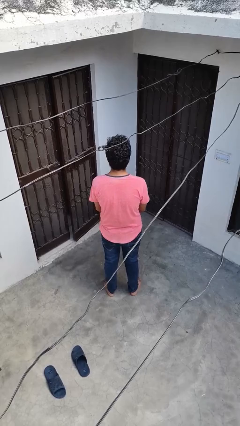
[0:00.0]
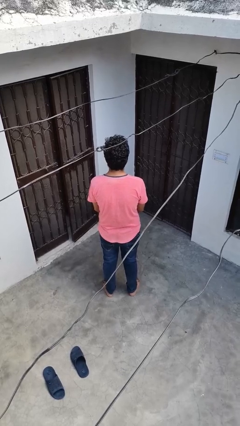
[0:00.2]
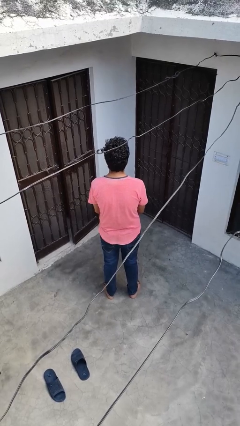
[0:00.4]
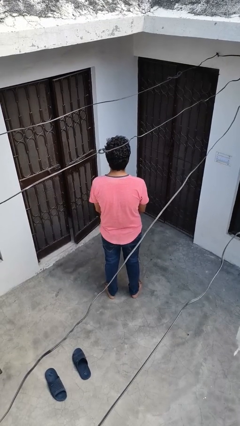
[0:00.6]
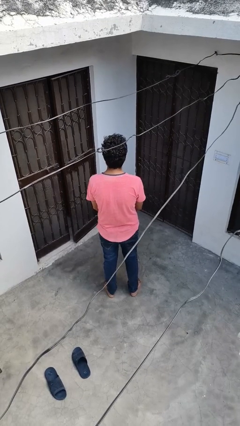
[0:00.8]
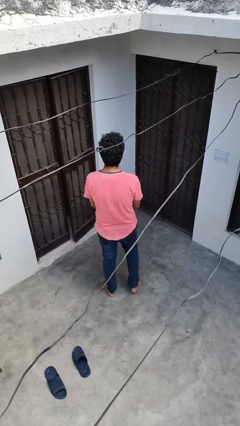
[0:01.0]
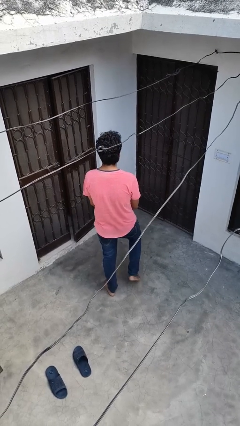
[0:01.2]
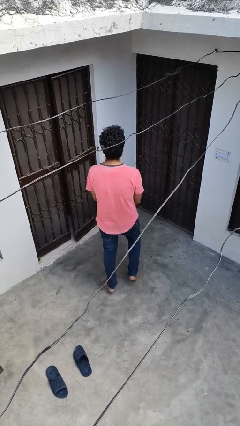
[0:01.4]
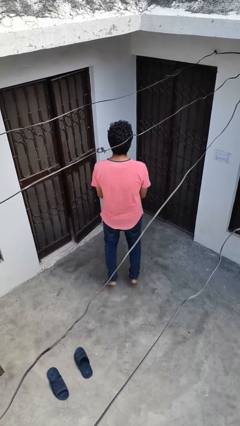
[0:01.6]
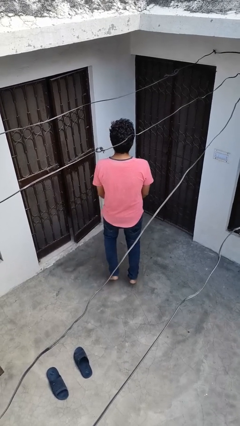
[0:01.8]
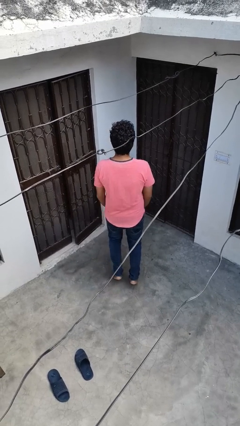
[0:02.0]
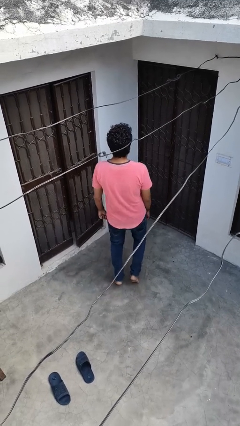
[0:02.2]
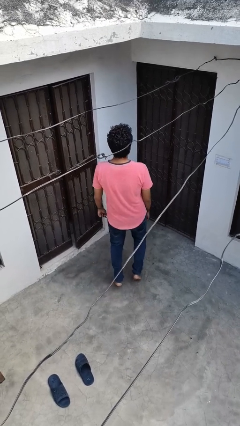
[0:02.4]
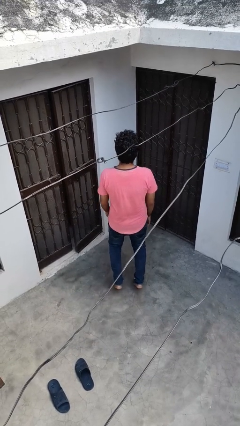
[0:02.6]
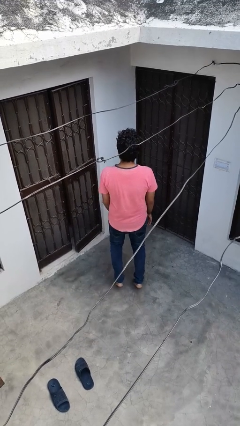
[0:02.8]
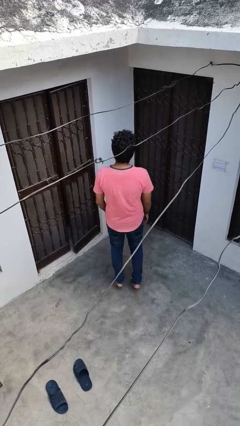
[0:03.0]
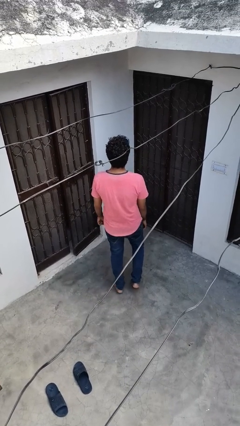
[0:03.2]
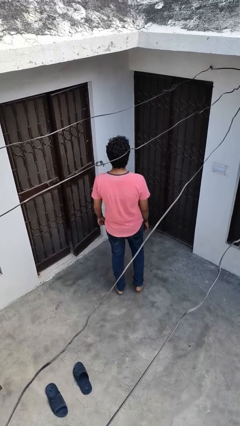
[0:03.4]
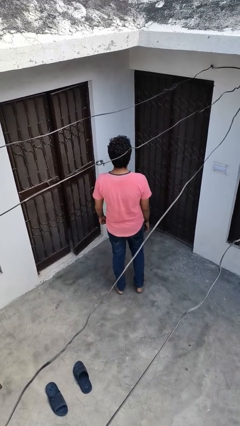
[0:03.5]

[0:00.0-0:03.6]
person walks tiptoe

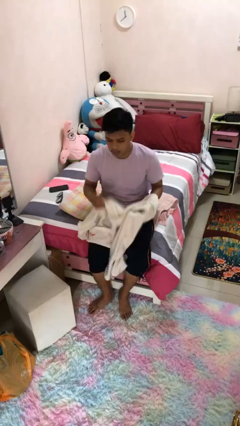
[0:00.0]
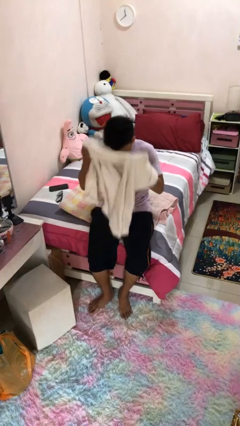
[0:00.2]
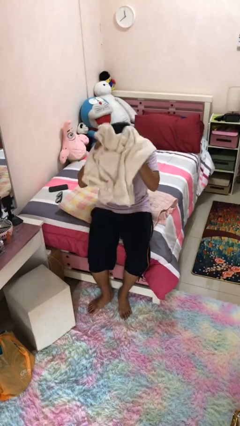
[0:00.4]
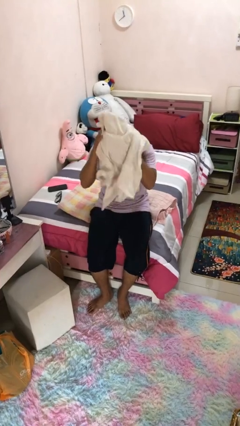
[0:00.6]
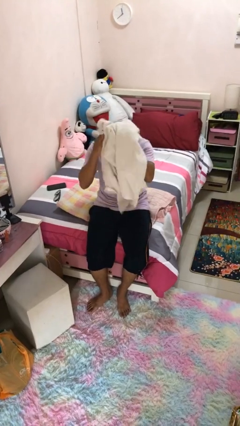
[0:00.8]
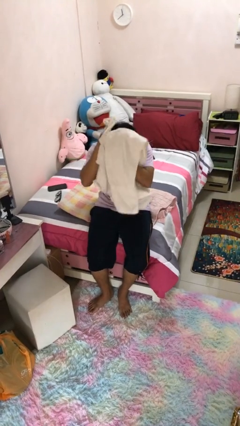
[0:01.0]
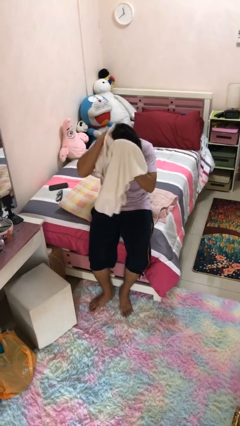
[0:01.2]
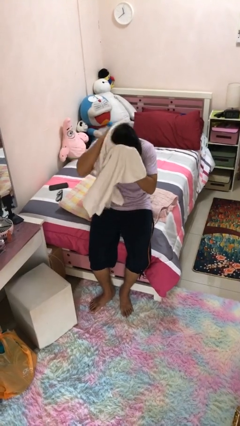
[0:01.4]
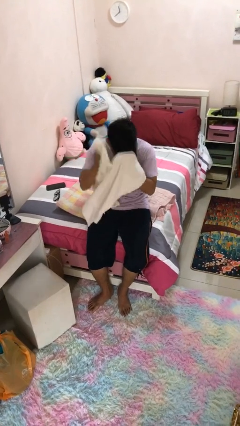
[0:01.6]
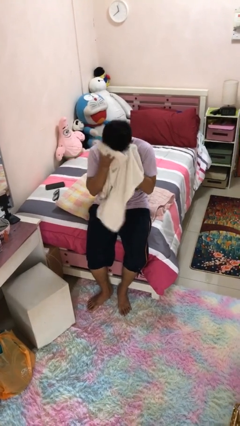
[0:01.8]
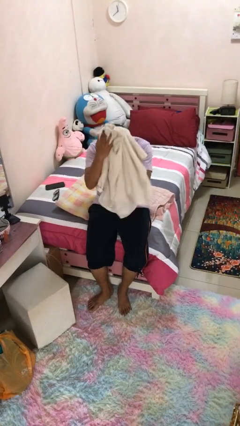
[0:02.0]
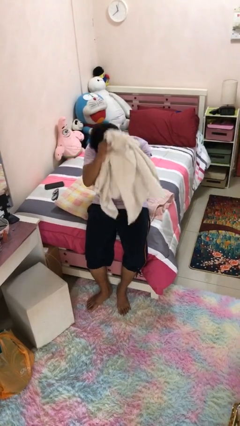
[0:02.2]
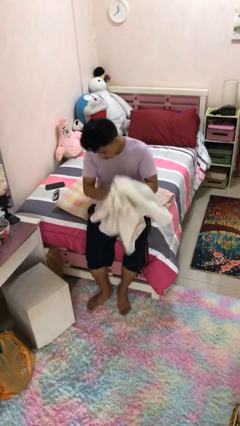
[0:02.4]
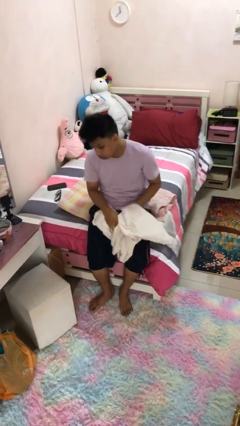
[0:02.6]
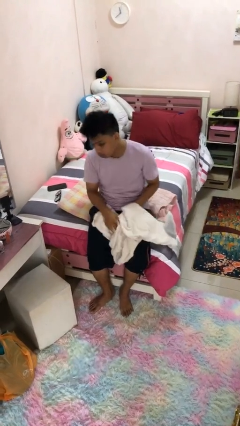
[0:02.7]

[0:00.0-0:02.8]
person dries hair with towel

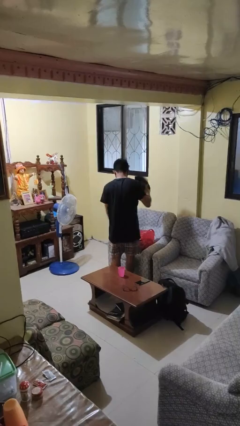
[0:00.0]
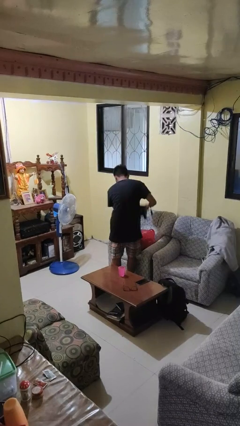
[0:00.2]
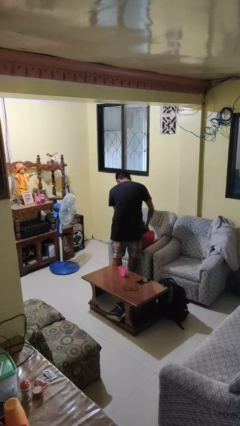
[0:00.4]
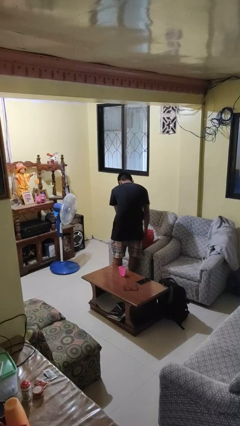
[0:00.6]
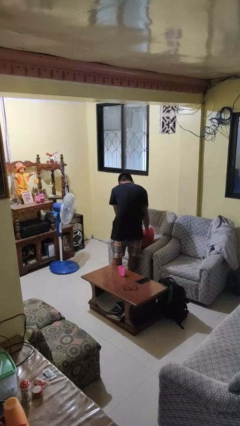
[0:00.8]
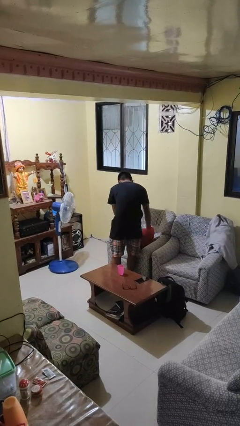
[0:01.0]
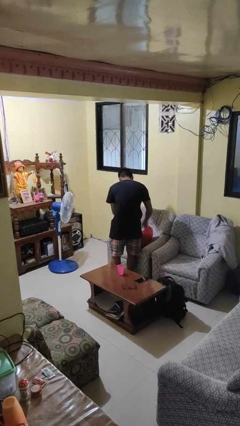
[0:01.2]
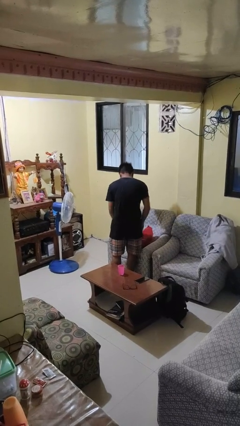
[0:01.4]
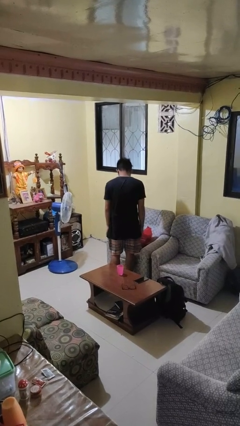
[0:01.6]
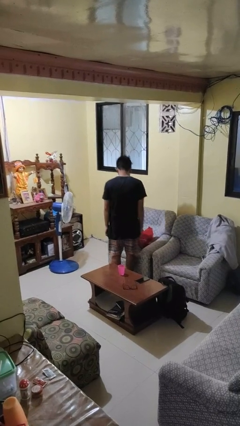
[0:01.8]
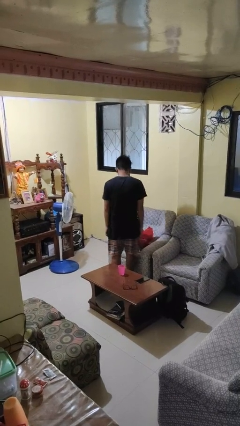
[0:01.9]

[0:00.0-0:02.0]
person puts object into bag

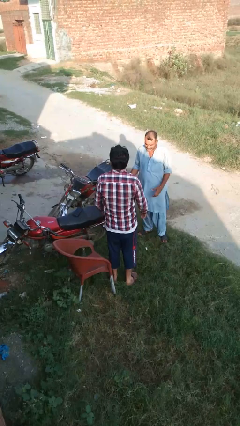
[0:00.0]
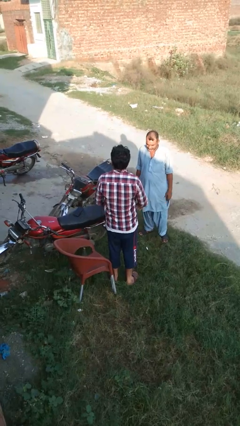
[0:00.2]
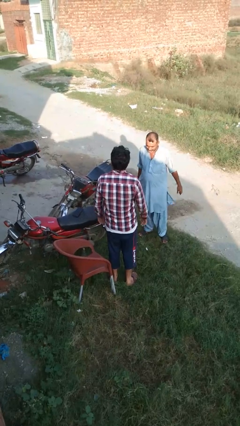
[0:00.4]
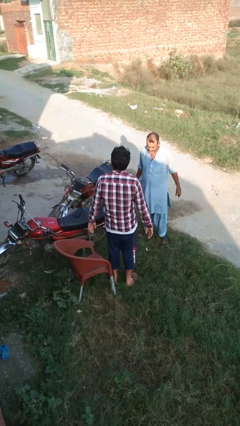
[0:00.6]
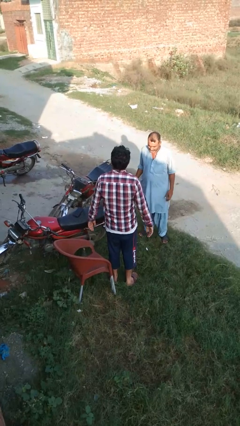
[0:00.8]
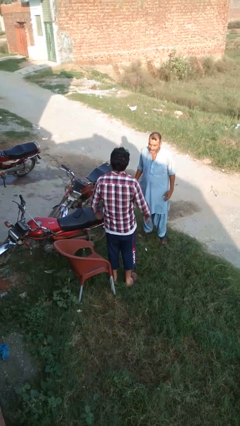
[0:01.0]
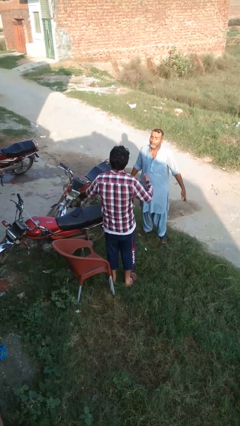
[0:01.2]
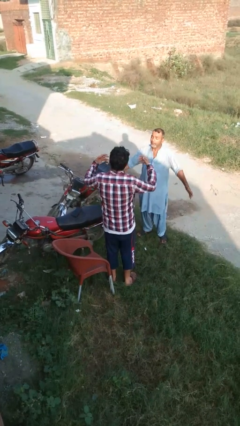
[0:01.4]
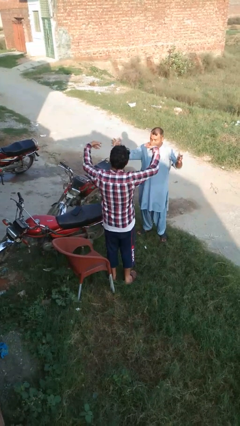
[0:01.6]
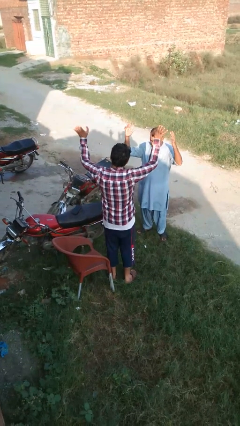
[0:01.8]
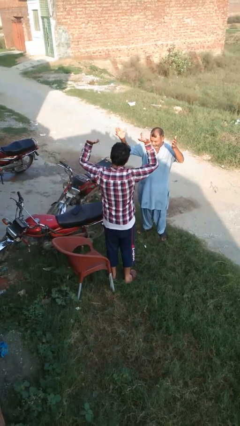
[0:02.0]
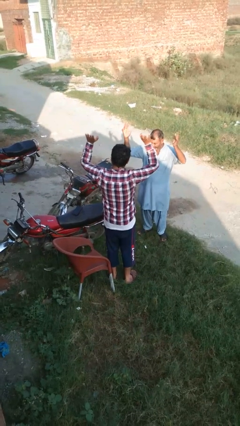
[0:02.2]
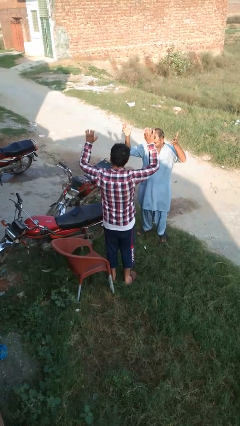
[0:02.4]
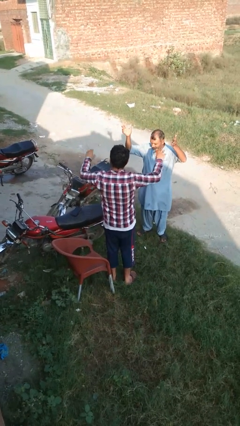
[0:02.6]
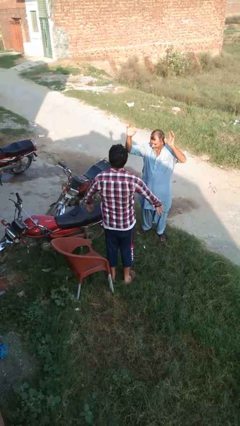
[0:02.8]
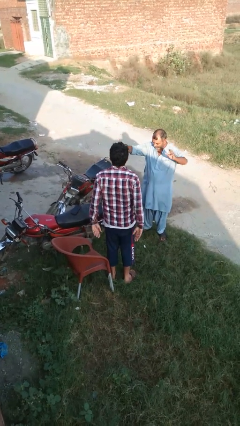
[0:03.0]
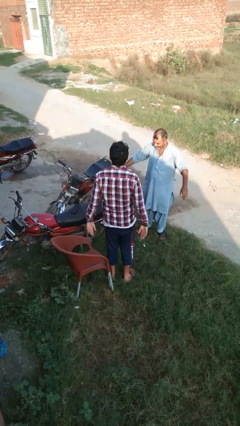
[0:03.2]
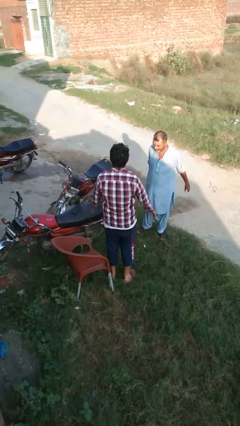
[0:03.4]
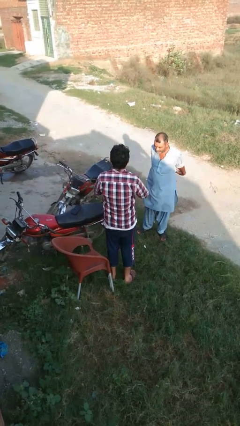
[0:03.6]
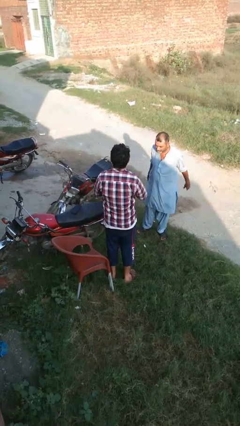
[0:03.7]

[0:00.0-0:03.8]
person laughs with person

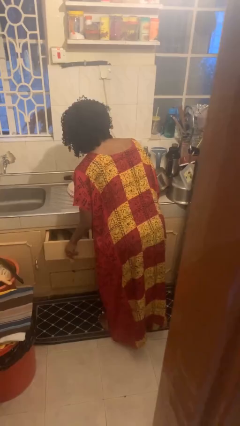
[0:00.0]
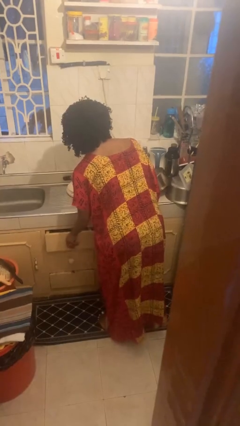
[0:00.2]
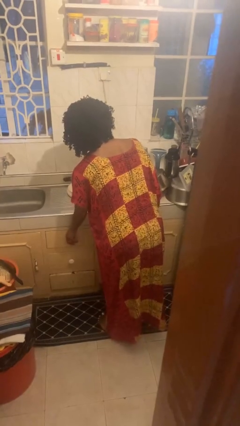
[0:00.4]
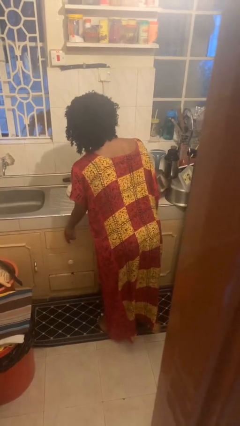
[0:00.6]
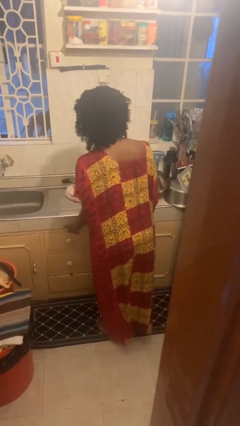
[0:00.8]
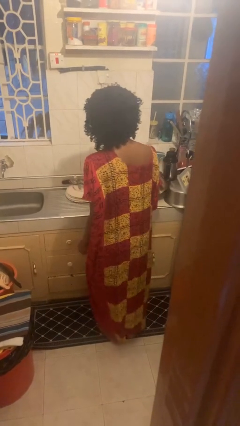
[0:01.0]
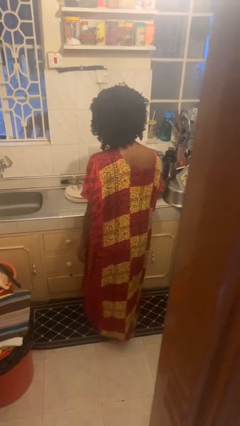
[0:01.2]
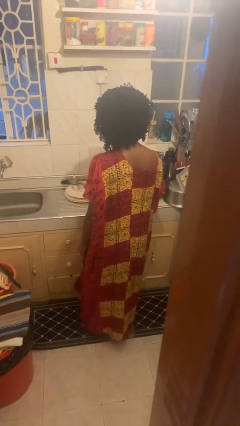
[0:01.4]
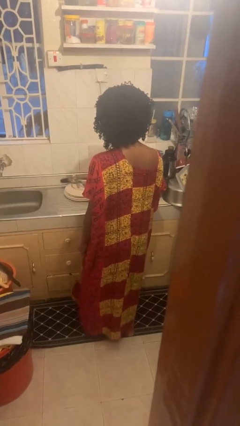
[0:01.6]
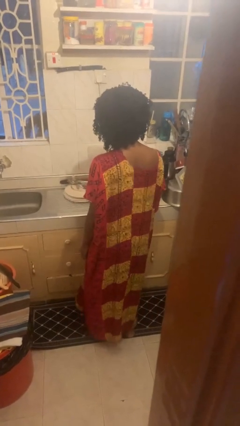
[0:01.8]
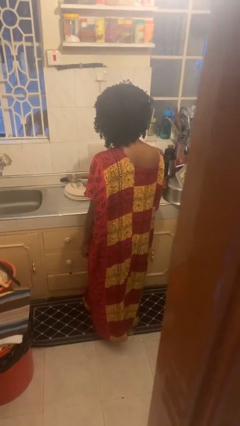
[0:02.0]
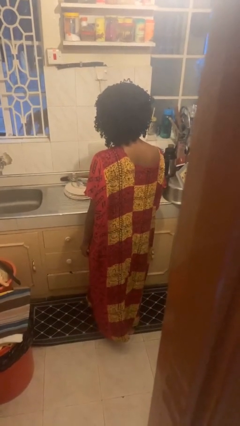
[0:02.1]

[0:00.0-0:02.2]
person closes kitchen drawer

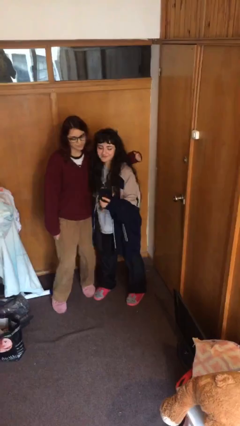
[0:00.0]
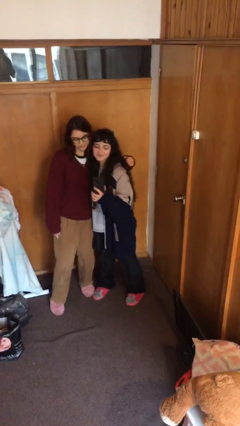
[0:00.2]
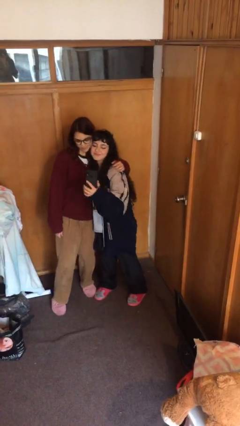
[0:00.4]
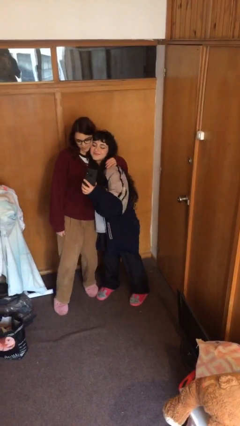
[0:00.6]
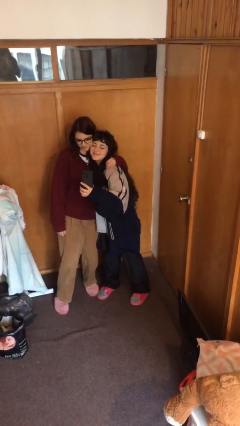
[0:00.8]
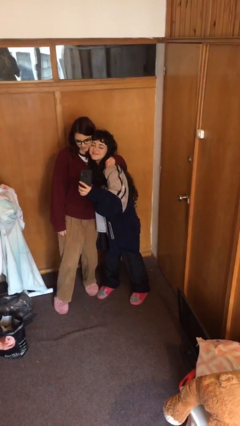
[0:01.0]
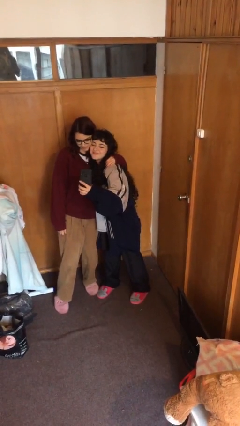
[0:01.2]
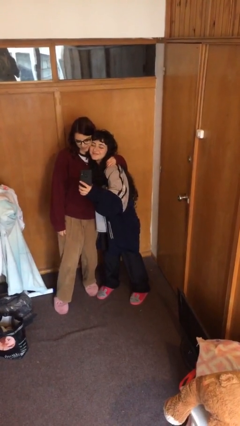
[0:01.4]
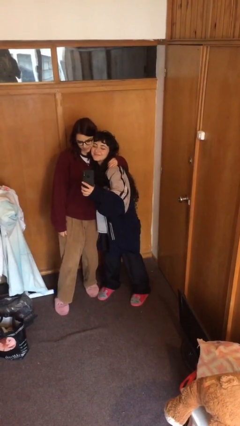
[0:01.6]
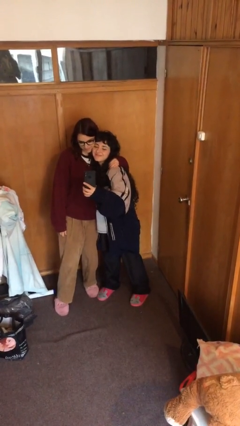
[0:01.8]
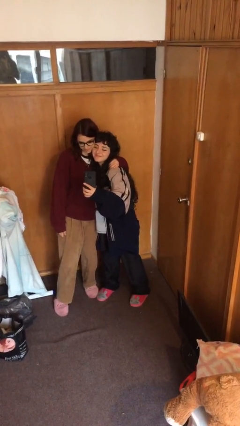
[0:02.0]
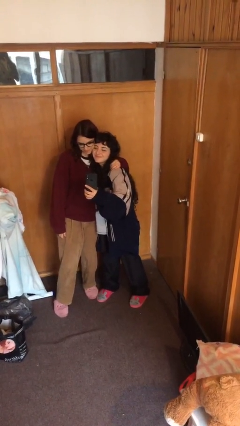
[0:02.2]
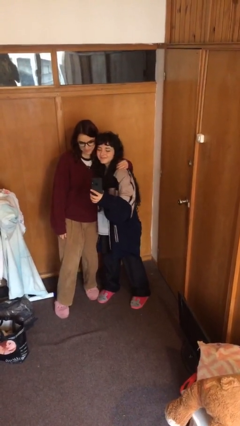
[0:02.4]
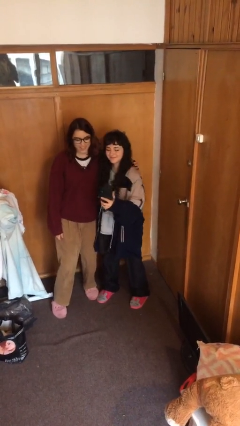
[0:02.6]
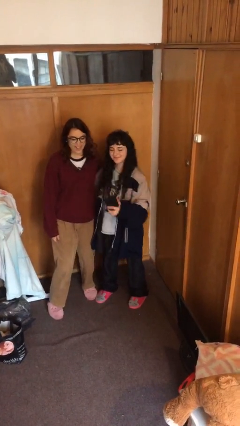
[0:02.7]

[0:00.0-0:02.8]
person takes selfie with person

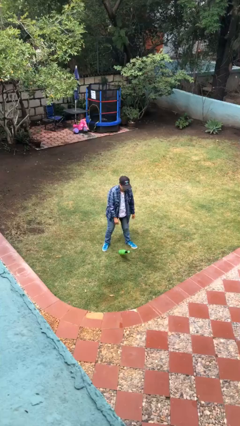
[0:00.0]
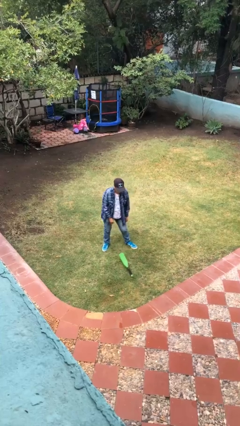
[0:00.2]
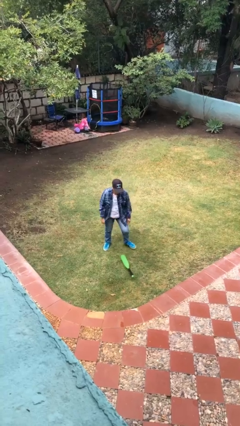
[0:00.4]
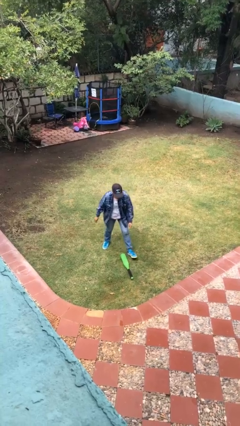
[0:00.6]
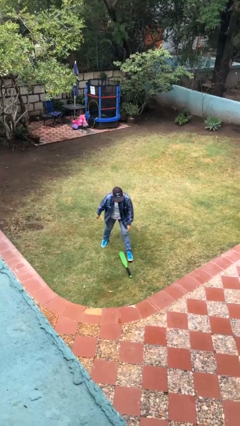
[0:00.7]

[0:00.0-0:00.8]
person drops object
